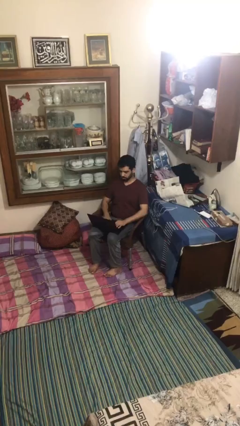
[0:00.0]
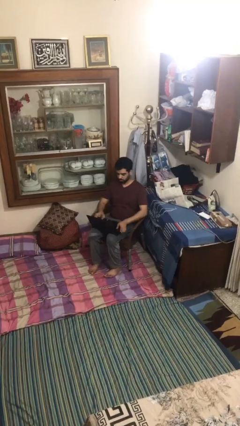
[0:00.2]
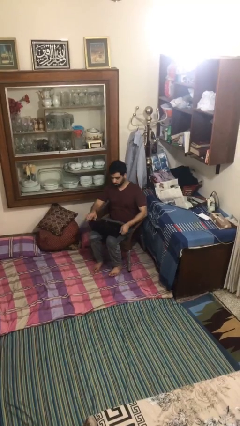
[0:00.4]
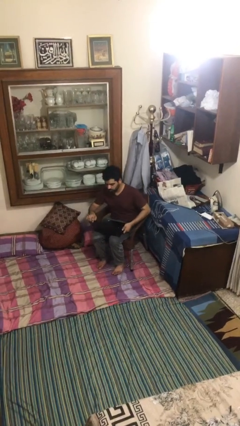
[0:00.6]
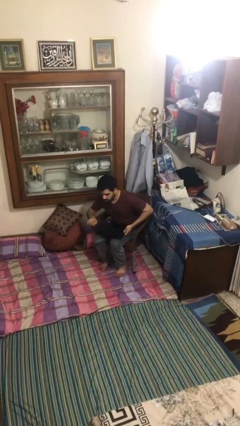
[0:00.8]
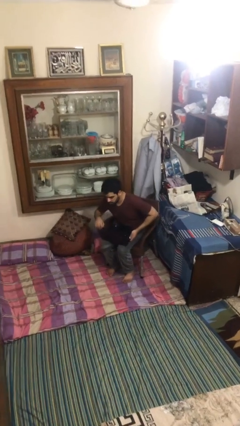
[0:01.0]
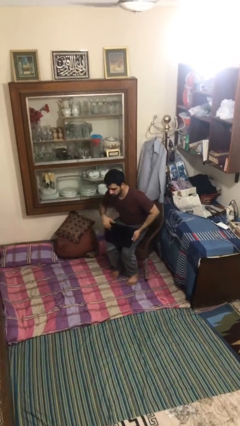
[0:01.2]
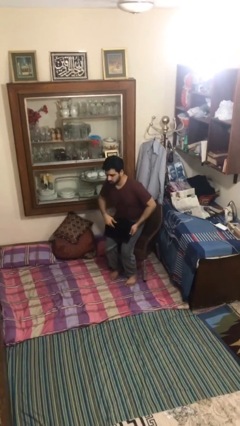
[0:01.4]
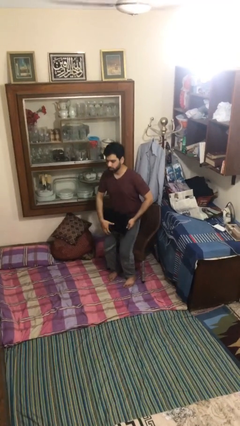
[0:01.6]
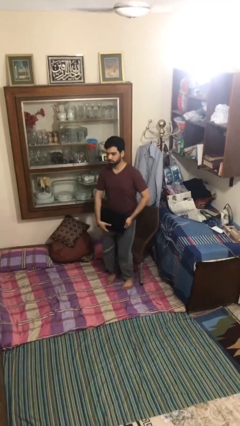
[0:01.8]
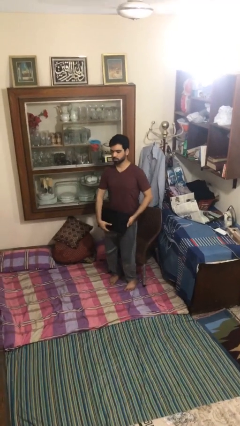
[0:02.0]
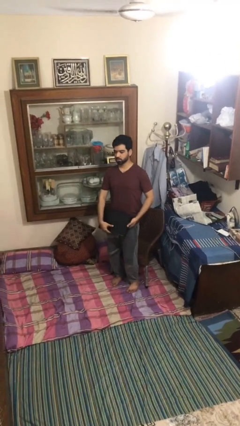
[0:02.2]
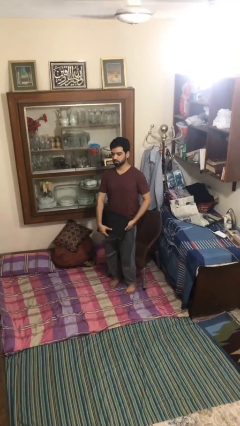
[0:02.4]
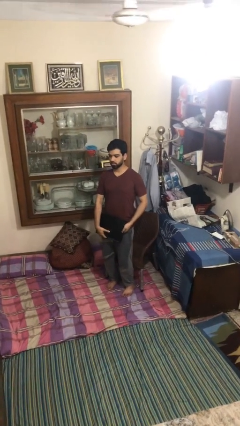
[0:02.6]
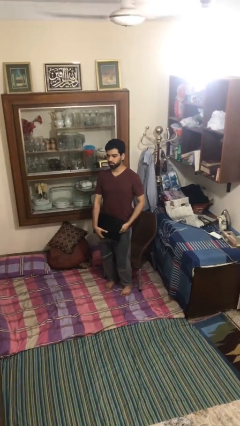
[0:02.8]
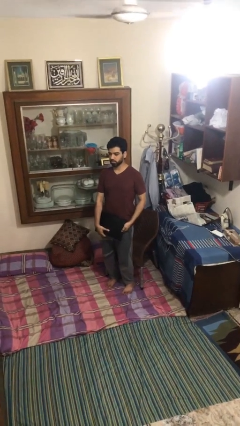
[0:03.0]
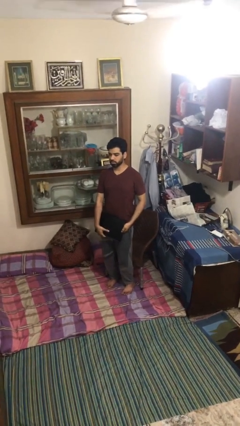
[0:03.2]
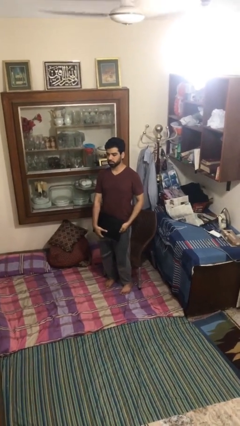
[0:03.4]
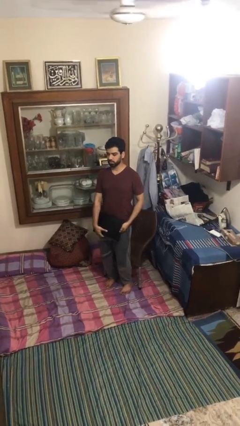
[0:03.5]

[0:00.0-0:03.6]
person stands up

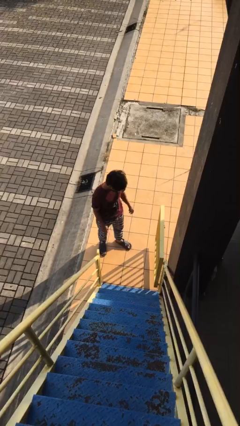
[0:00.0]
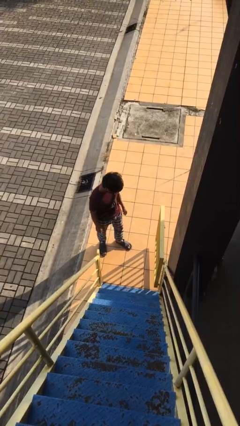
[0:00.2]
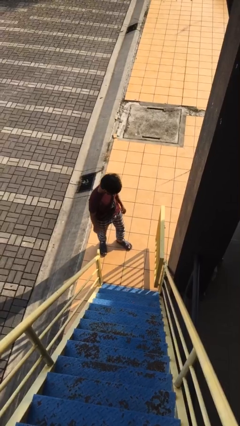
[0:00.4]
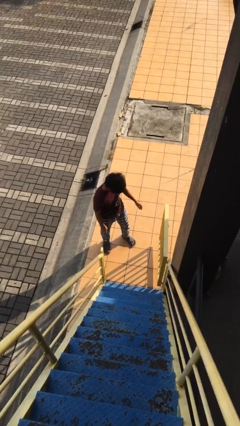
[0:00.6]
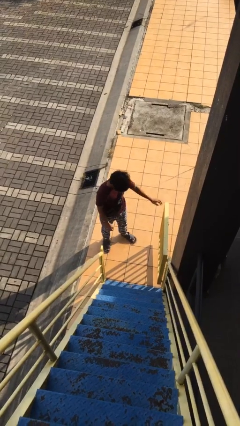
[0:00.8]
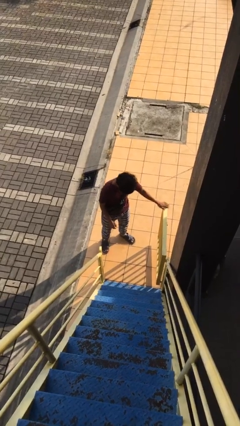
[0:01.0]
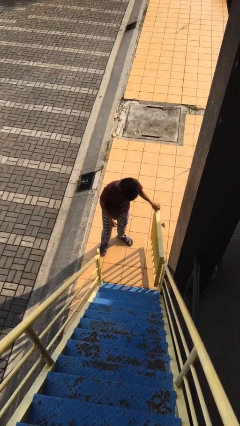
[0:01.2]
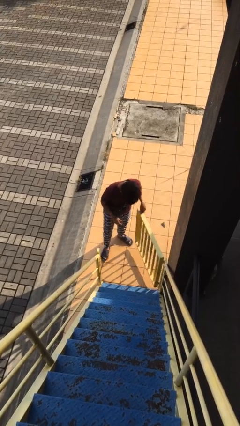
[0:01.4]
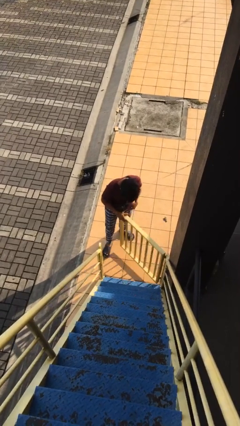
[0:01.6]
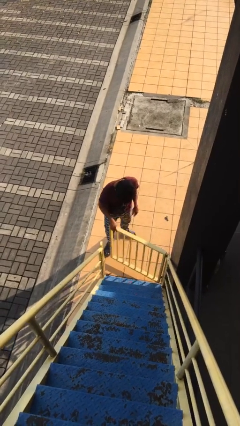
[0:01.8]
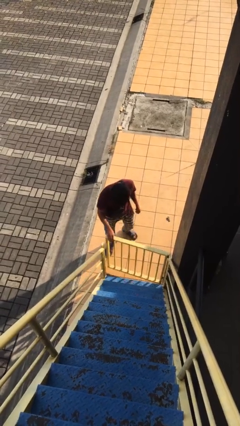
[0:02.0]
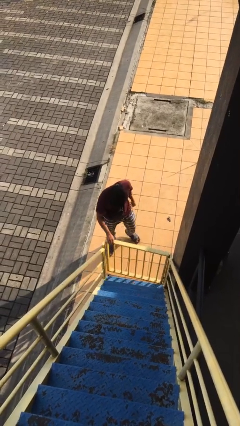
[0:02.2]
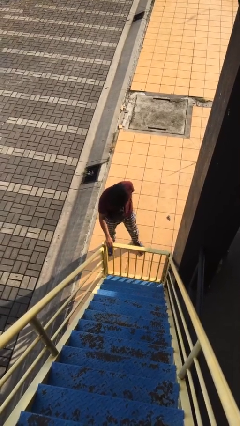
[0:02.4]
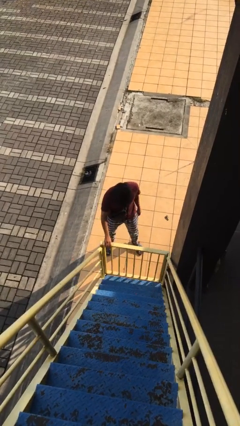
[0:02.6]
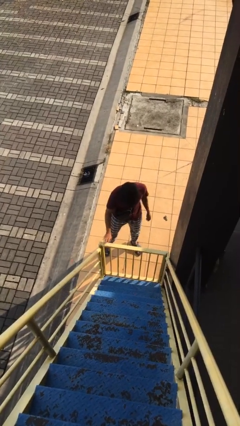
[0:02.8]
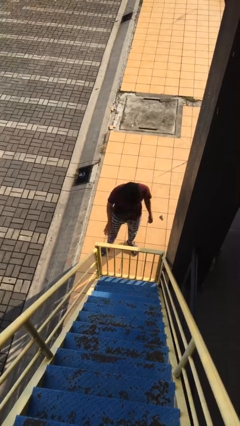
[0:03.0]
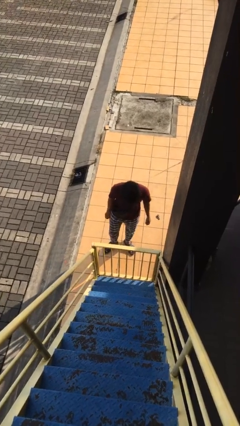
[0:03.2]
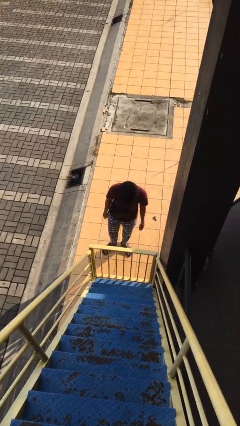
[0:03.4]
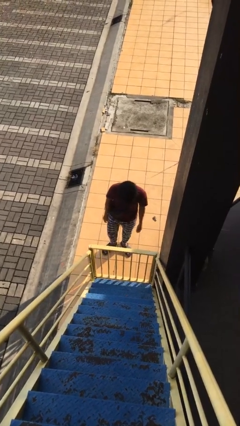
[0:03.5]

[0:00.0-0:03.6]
person closes facility door

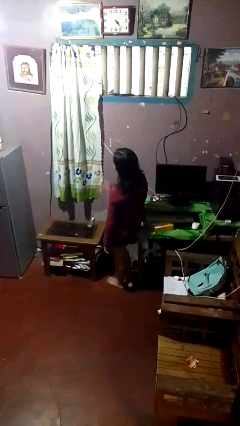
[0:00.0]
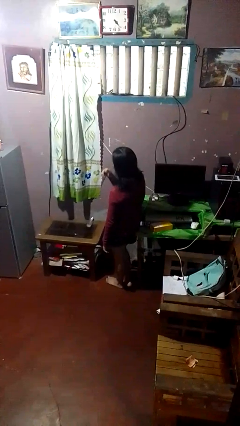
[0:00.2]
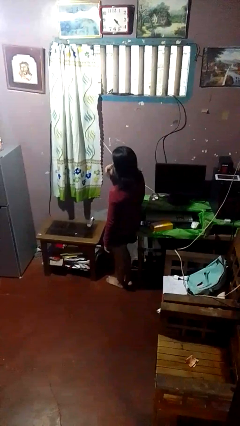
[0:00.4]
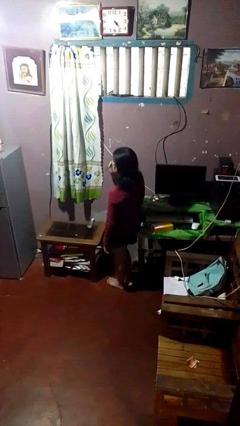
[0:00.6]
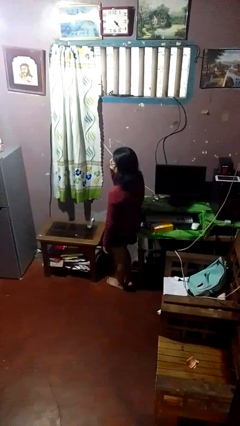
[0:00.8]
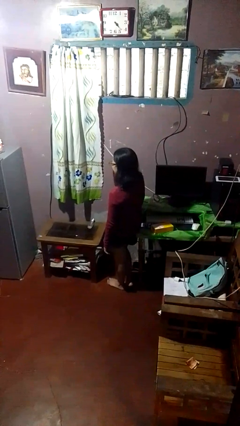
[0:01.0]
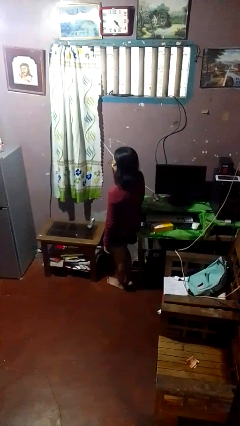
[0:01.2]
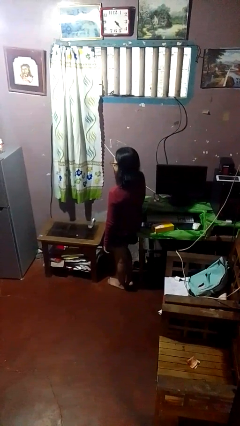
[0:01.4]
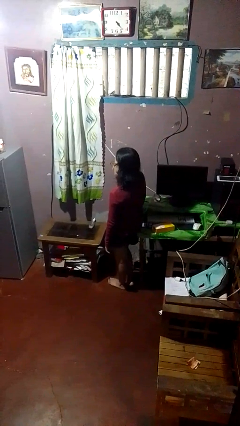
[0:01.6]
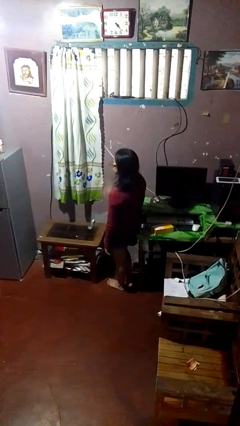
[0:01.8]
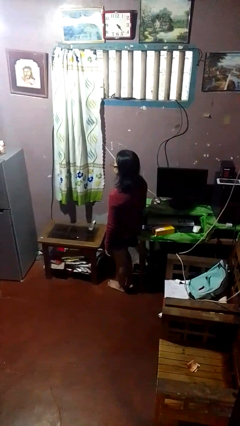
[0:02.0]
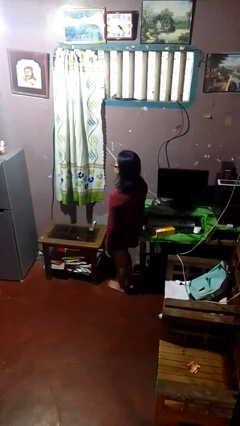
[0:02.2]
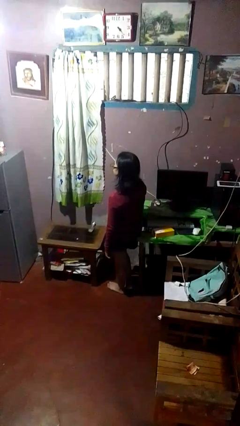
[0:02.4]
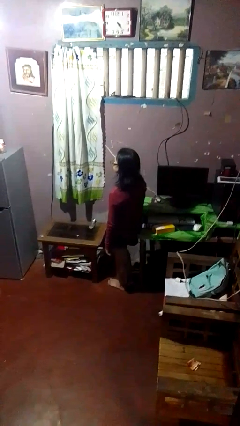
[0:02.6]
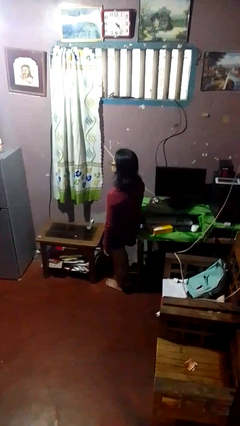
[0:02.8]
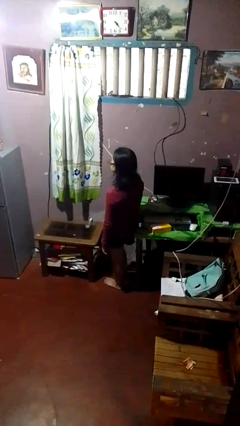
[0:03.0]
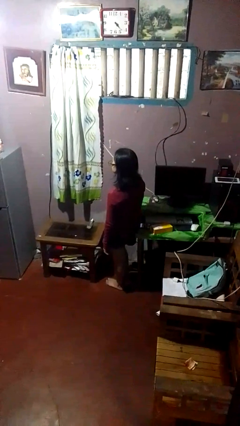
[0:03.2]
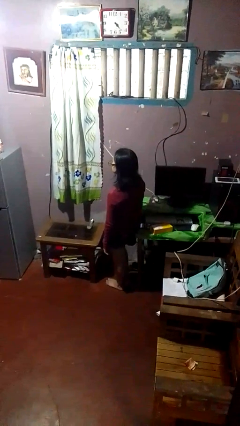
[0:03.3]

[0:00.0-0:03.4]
person puts on glasses

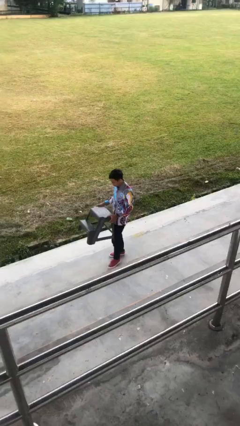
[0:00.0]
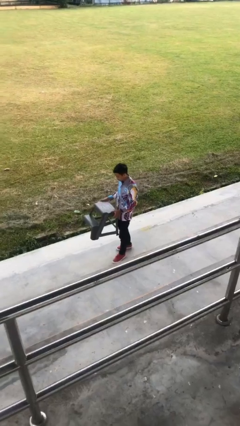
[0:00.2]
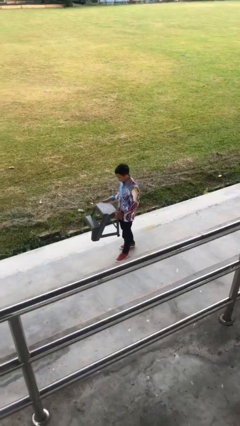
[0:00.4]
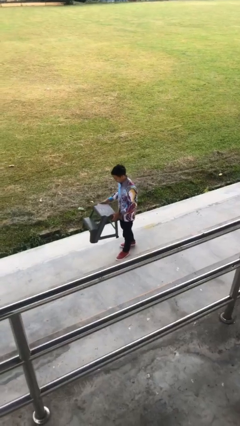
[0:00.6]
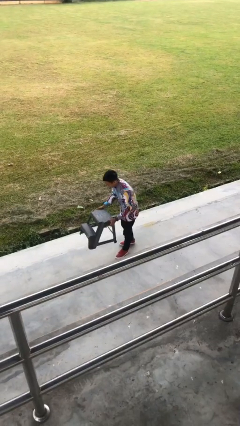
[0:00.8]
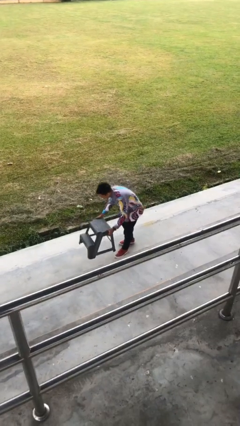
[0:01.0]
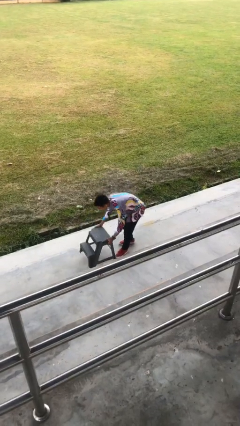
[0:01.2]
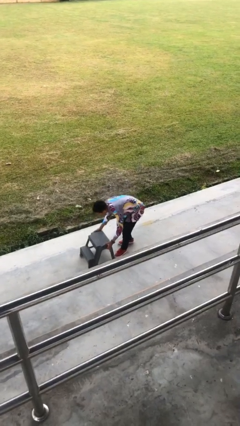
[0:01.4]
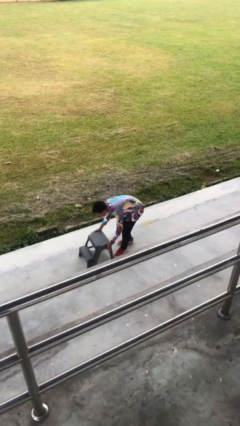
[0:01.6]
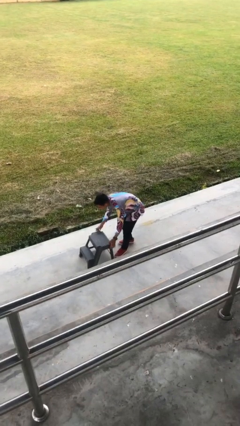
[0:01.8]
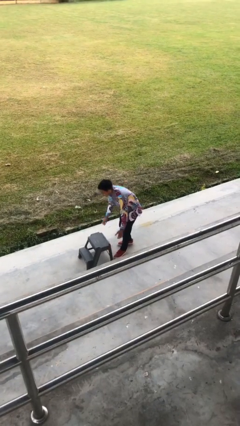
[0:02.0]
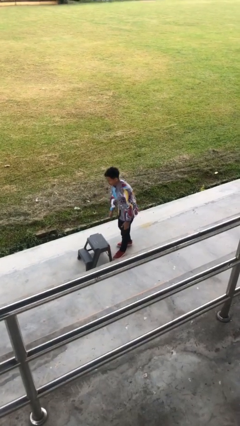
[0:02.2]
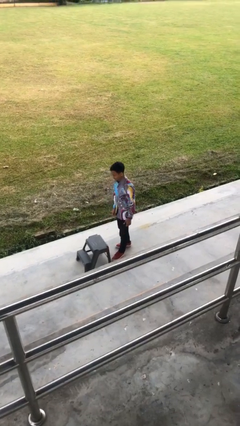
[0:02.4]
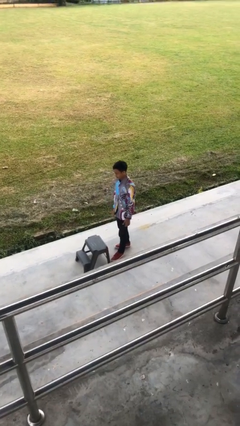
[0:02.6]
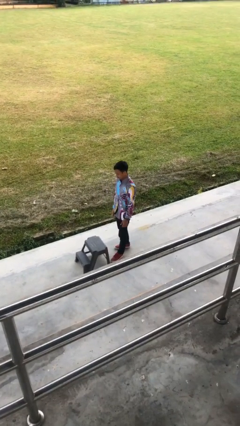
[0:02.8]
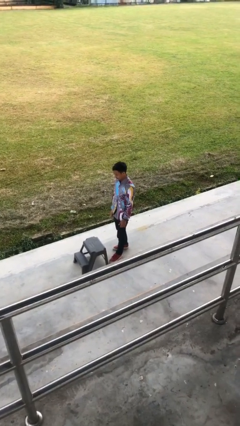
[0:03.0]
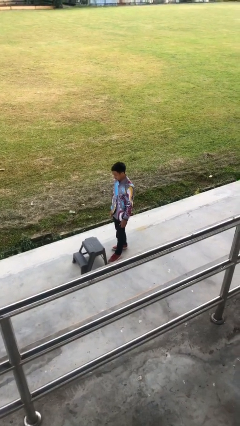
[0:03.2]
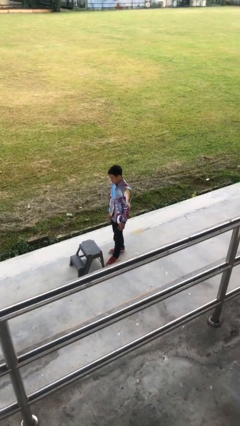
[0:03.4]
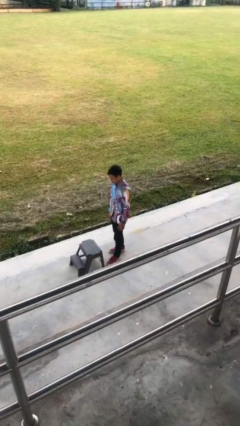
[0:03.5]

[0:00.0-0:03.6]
person puts down object on floor

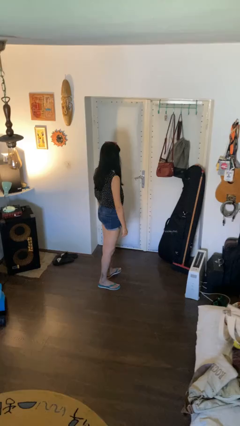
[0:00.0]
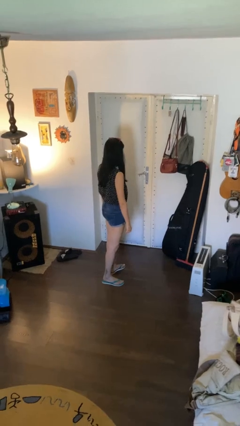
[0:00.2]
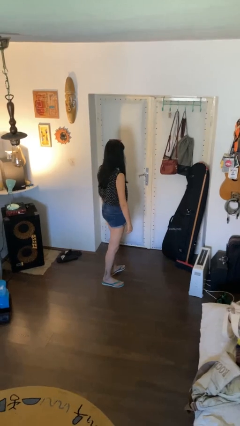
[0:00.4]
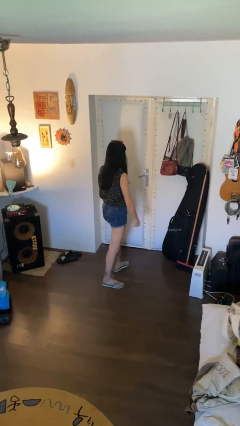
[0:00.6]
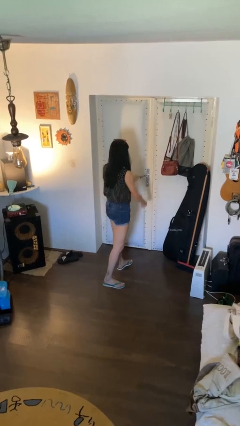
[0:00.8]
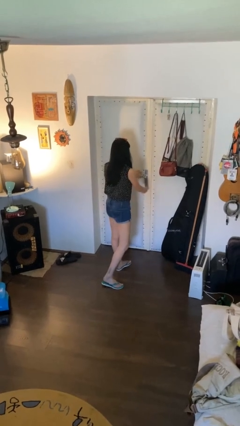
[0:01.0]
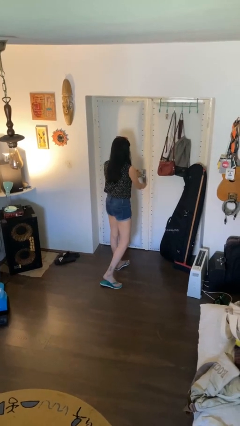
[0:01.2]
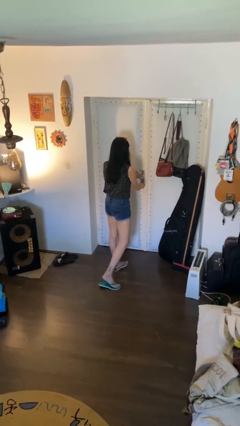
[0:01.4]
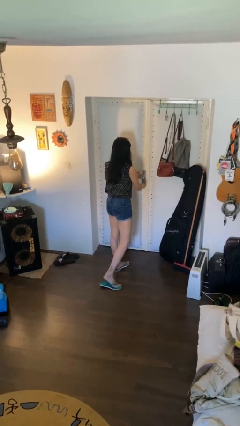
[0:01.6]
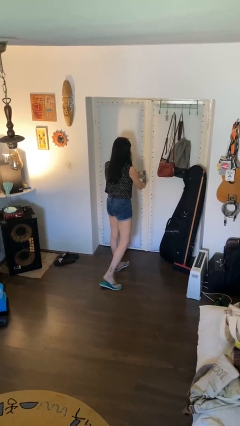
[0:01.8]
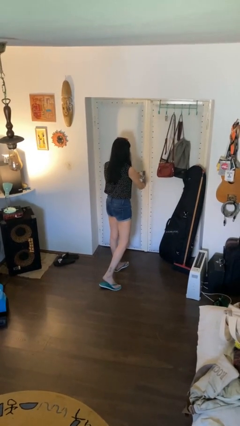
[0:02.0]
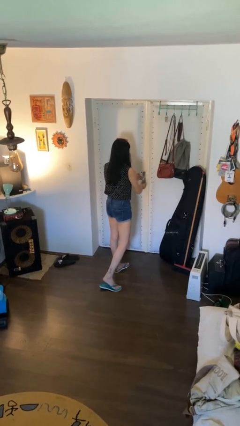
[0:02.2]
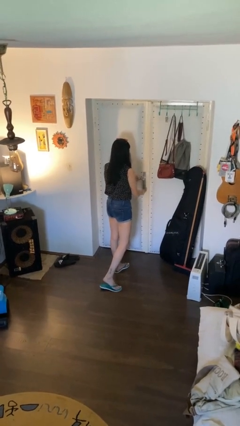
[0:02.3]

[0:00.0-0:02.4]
person unlocks door with keys

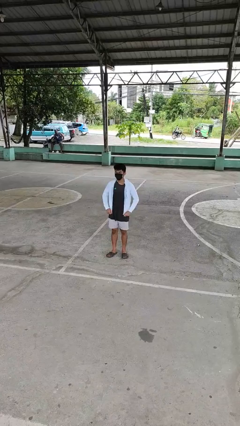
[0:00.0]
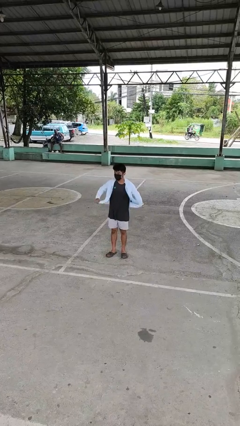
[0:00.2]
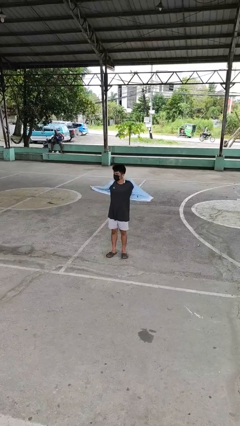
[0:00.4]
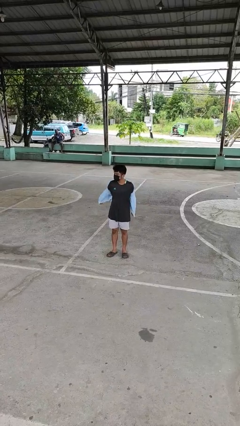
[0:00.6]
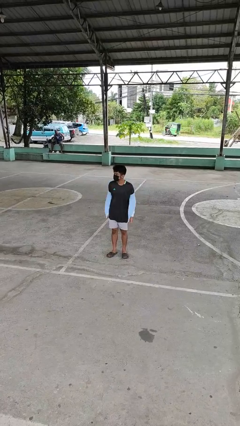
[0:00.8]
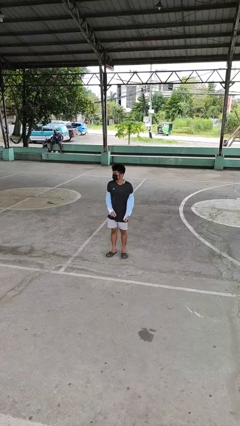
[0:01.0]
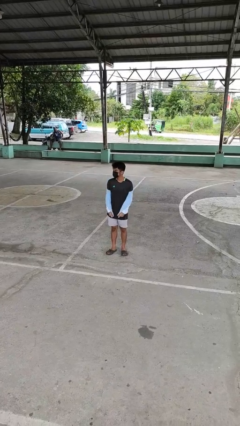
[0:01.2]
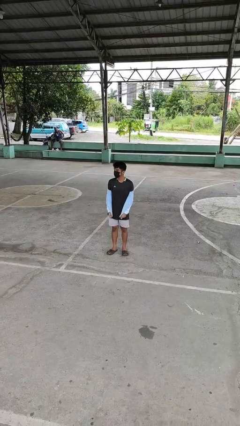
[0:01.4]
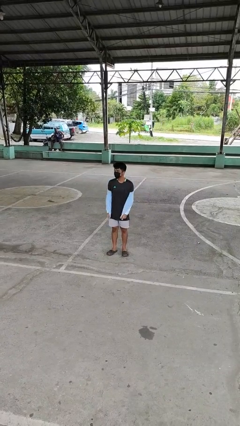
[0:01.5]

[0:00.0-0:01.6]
person takes off jacket
